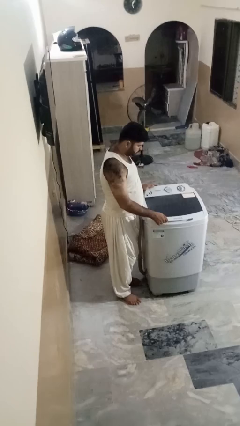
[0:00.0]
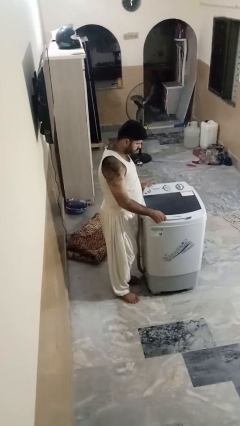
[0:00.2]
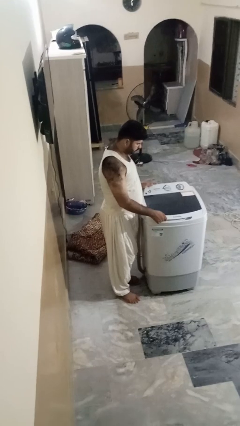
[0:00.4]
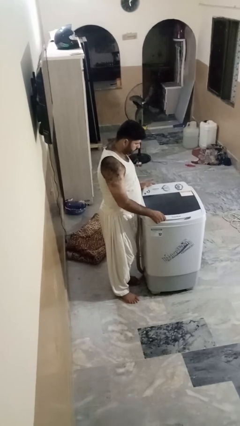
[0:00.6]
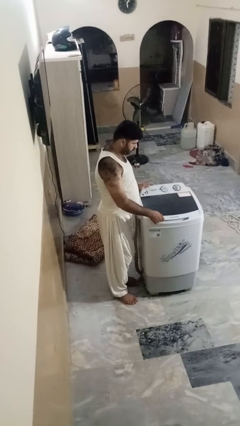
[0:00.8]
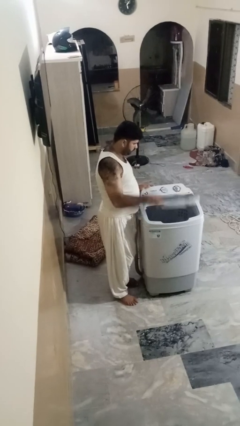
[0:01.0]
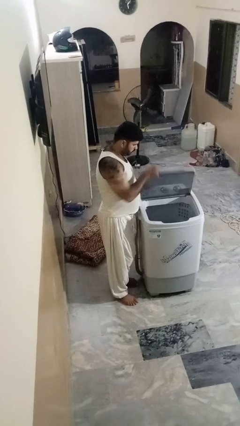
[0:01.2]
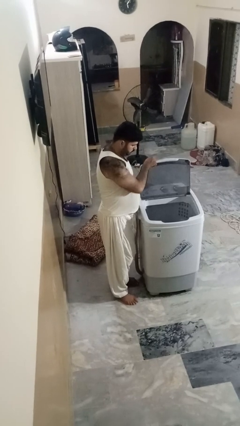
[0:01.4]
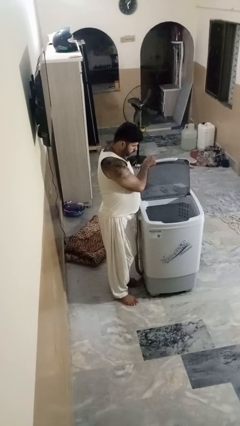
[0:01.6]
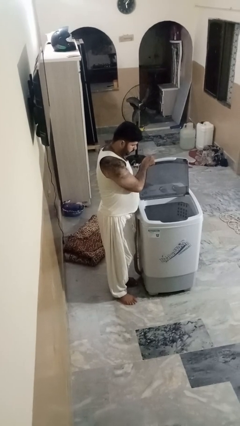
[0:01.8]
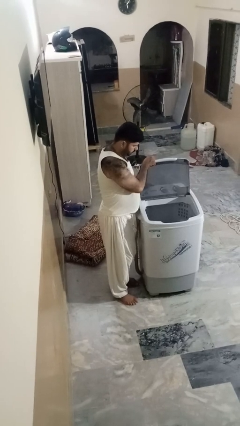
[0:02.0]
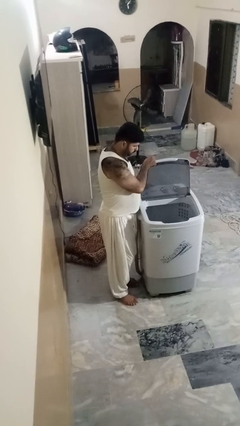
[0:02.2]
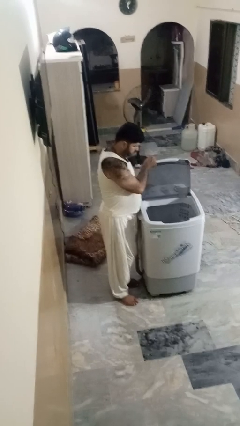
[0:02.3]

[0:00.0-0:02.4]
person opens clothes washer

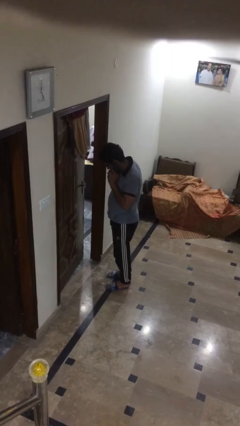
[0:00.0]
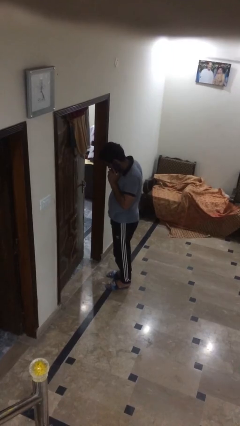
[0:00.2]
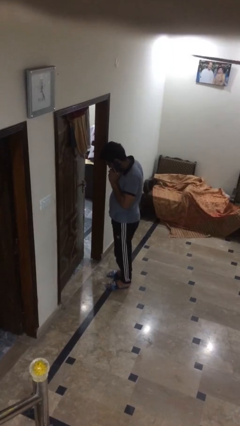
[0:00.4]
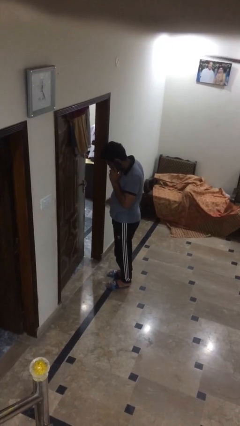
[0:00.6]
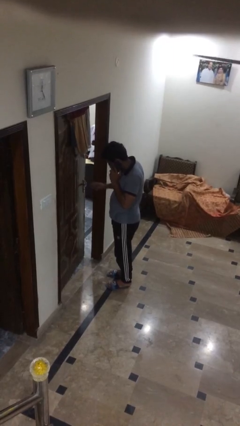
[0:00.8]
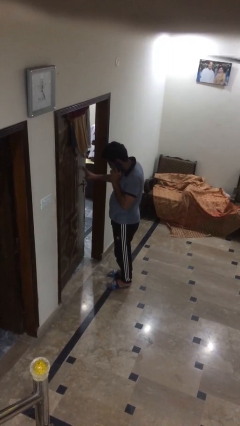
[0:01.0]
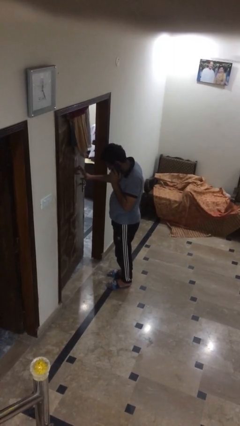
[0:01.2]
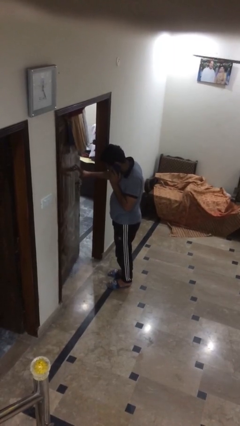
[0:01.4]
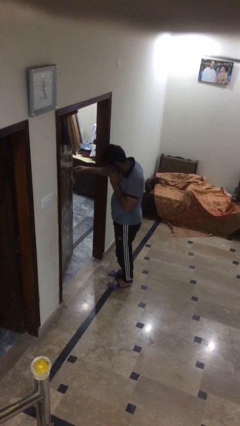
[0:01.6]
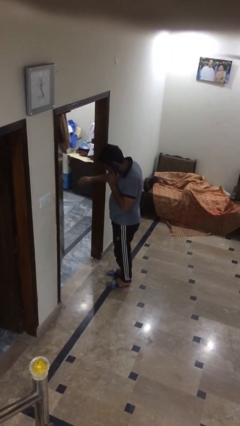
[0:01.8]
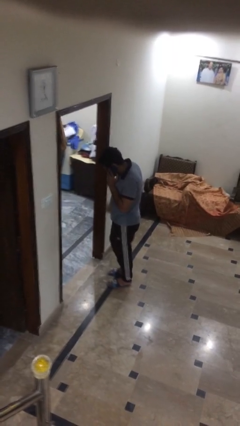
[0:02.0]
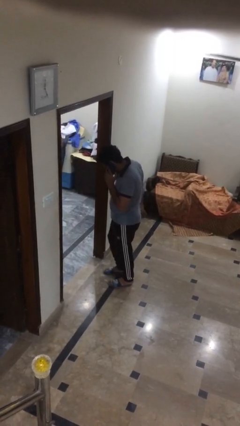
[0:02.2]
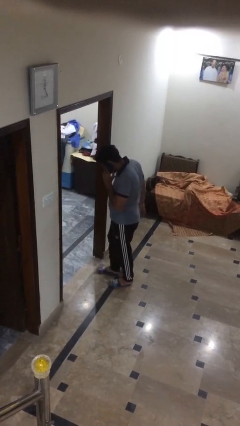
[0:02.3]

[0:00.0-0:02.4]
person opens facility door

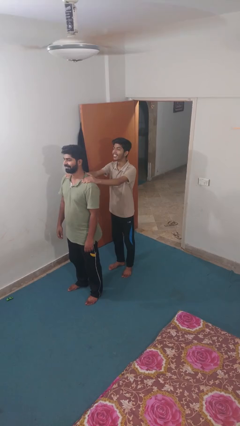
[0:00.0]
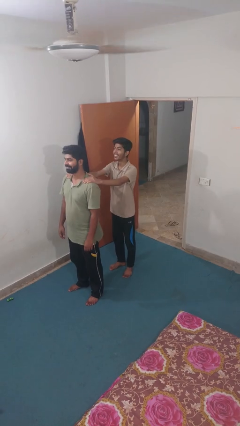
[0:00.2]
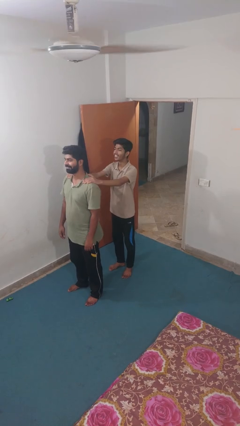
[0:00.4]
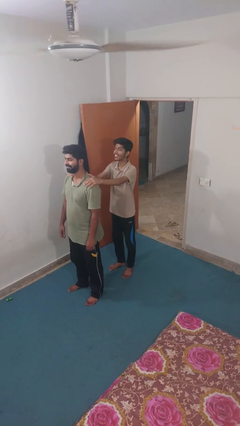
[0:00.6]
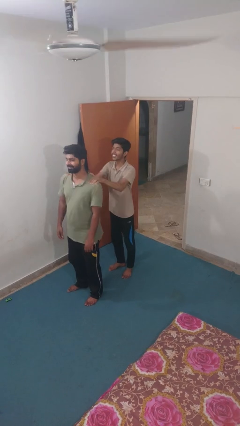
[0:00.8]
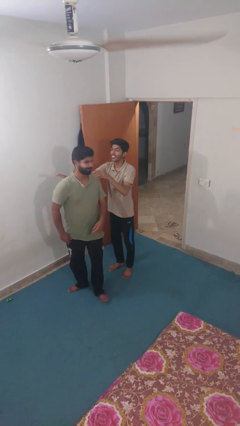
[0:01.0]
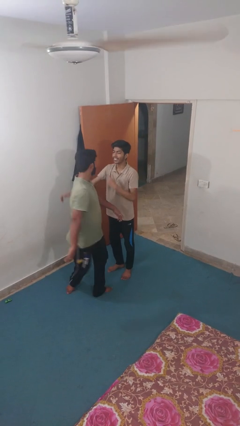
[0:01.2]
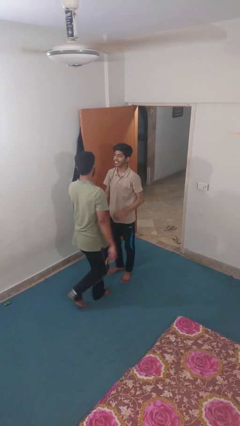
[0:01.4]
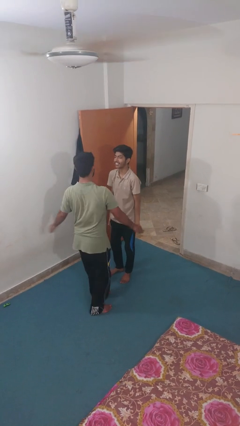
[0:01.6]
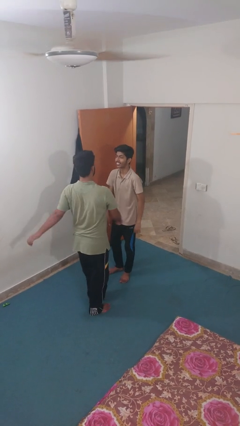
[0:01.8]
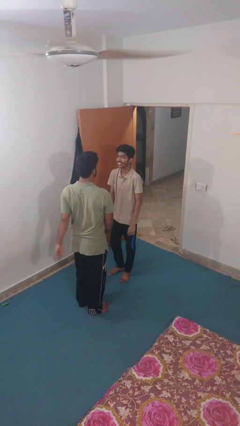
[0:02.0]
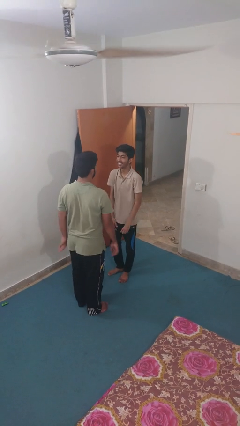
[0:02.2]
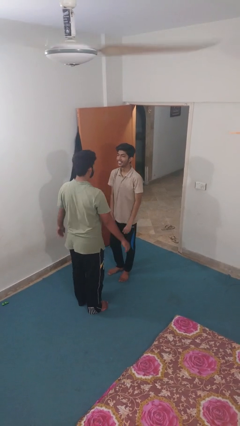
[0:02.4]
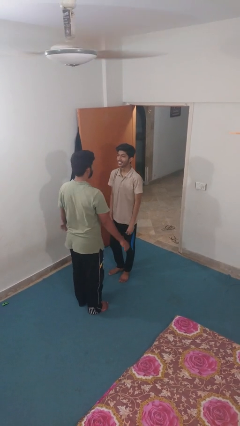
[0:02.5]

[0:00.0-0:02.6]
person spins person around

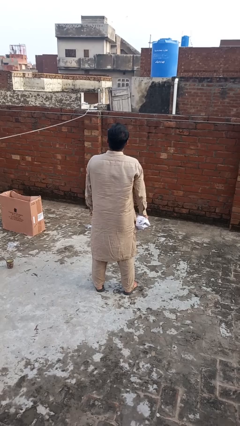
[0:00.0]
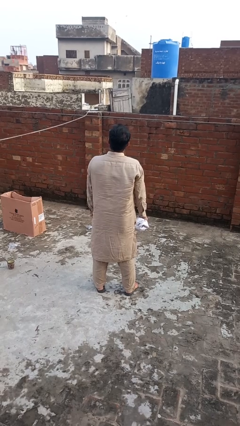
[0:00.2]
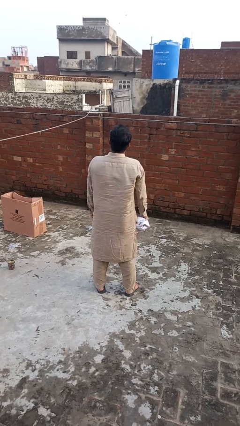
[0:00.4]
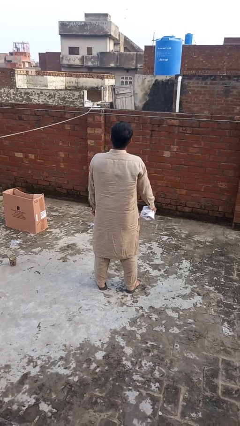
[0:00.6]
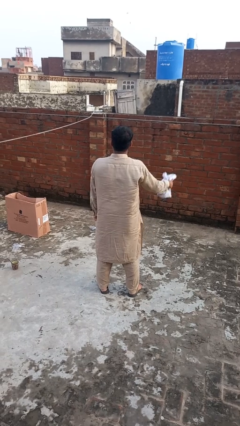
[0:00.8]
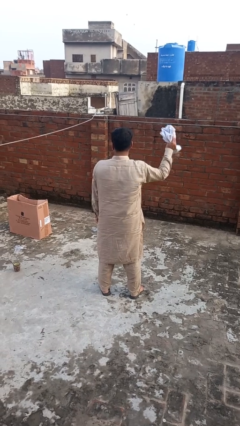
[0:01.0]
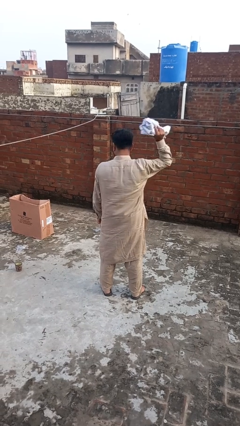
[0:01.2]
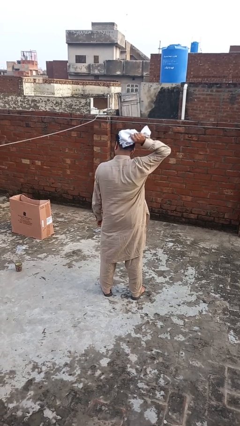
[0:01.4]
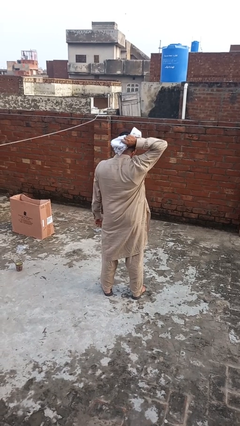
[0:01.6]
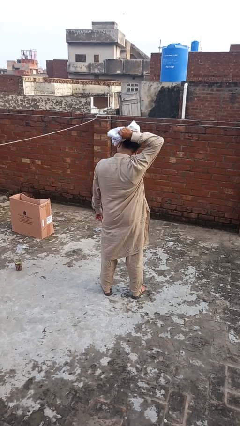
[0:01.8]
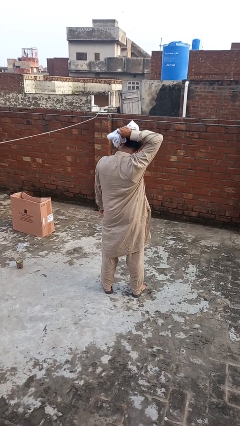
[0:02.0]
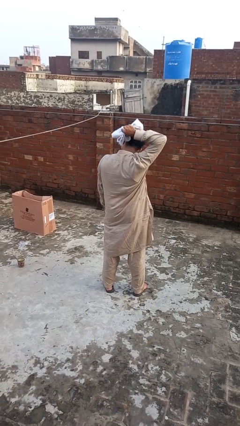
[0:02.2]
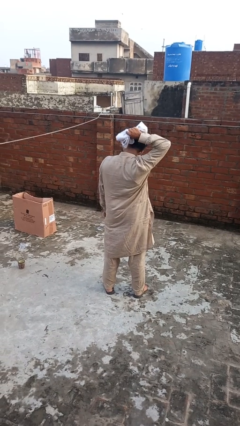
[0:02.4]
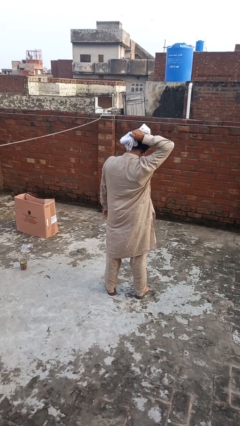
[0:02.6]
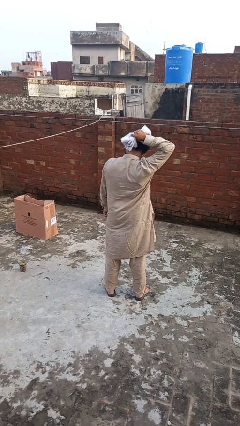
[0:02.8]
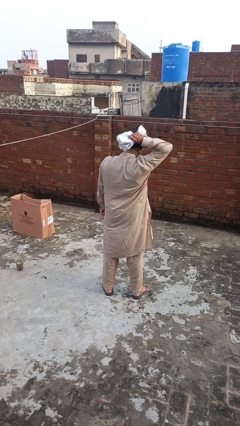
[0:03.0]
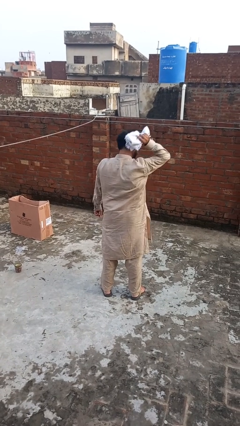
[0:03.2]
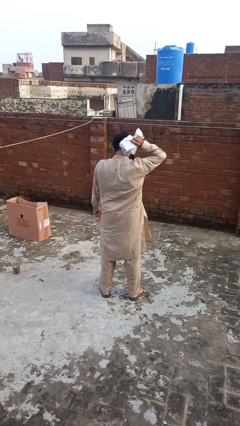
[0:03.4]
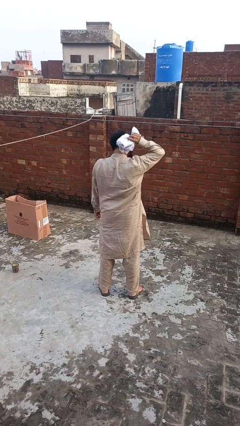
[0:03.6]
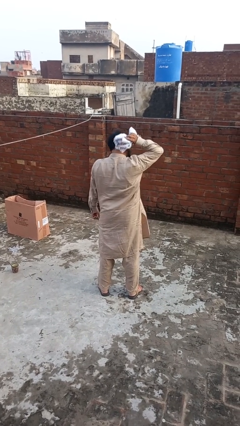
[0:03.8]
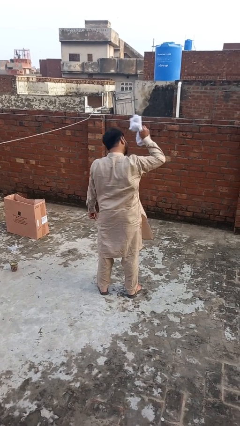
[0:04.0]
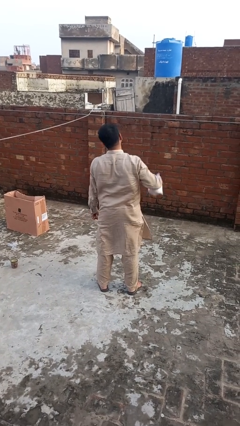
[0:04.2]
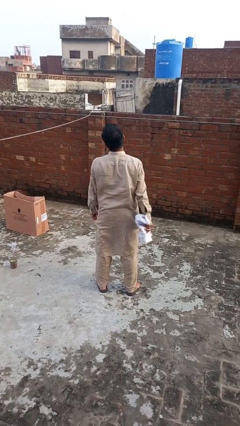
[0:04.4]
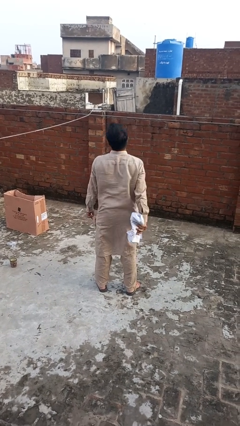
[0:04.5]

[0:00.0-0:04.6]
person dries hair with towel

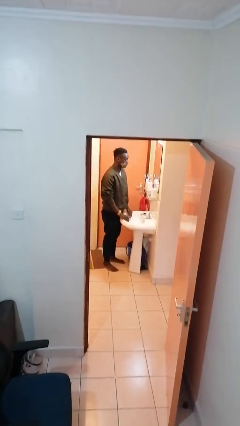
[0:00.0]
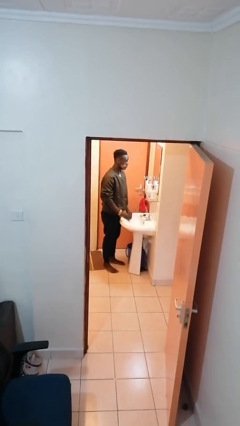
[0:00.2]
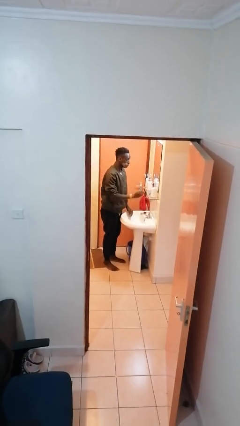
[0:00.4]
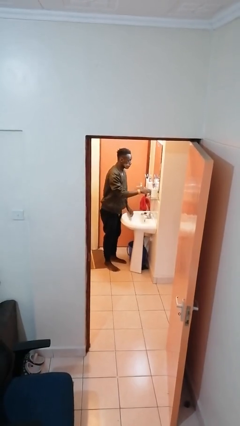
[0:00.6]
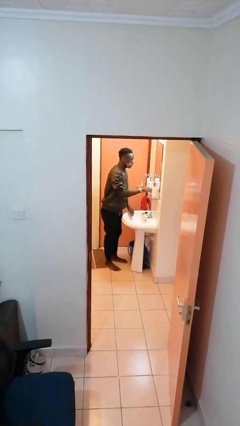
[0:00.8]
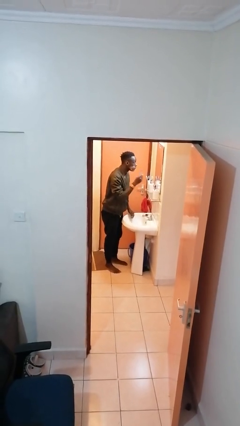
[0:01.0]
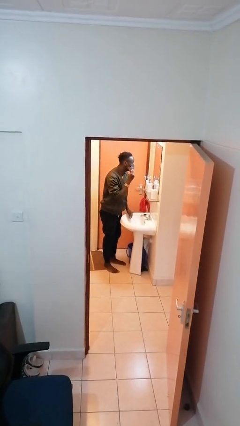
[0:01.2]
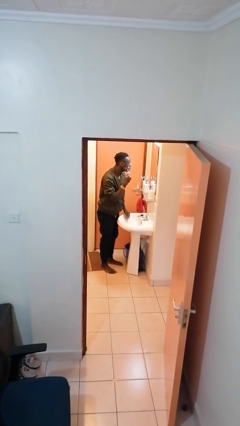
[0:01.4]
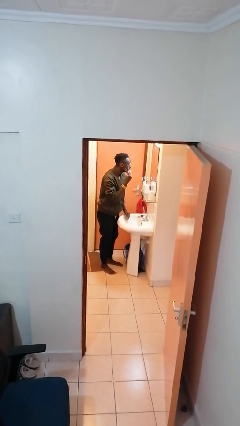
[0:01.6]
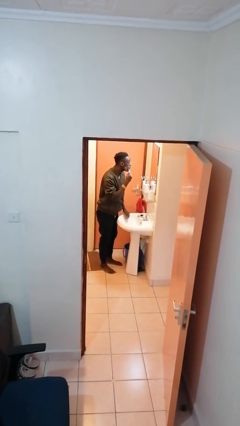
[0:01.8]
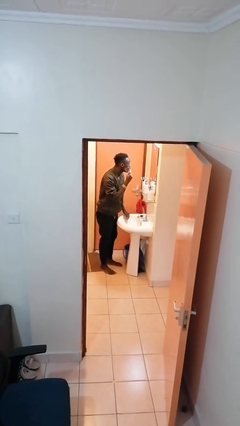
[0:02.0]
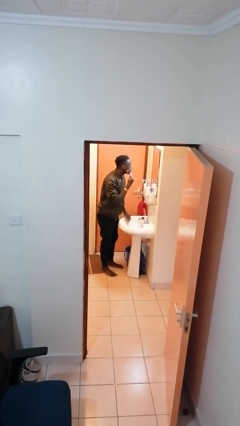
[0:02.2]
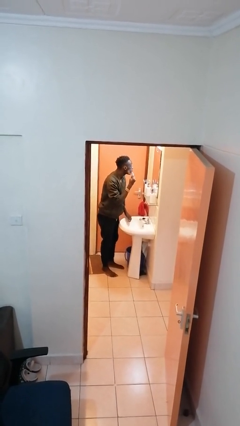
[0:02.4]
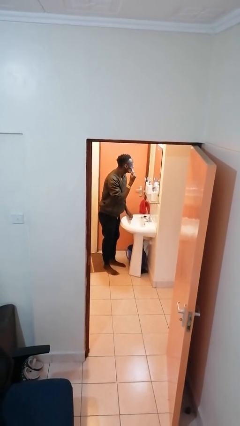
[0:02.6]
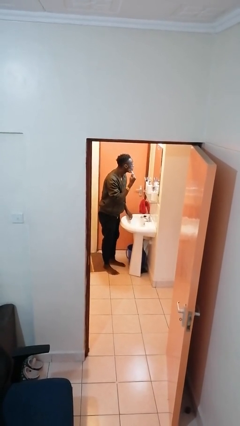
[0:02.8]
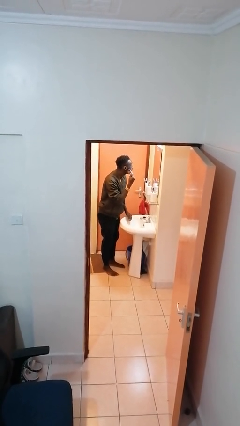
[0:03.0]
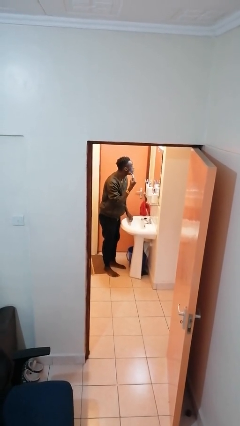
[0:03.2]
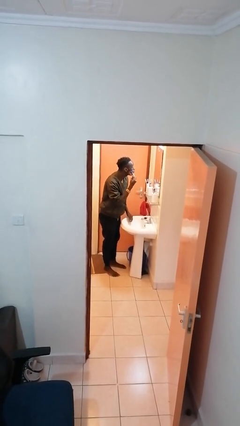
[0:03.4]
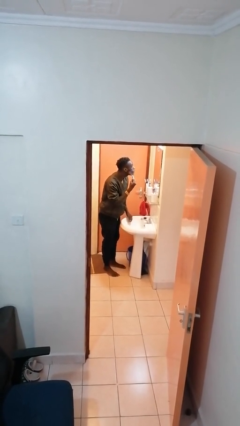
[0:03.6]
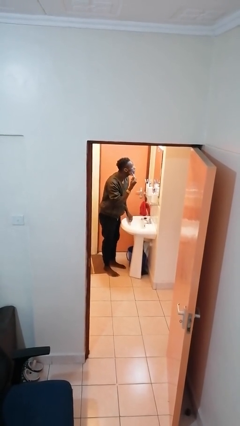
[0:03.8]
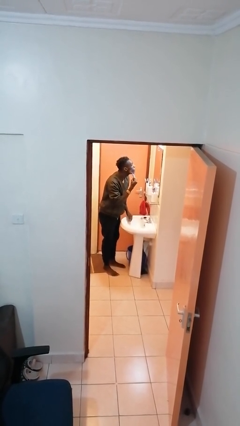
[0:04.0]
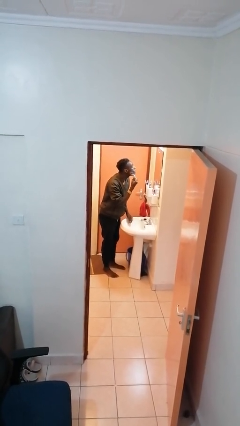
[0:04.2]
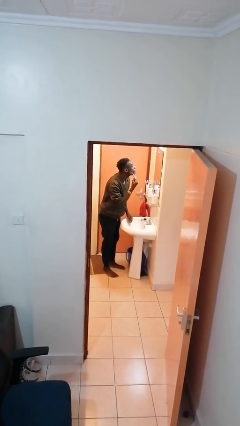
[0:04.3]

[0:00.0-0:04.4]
person shaves face

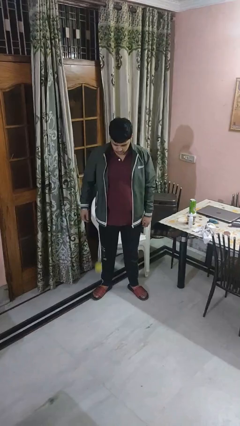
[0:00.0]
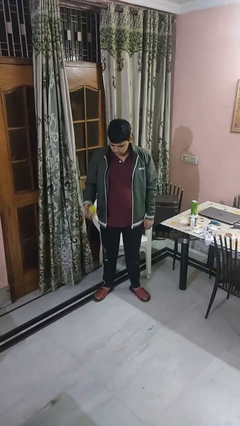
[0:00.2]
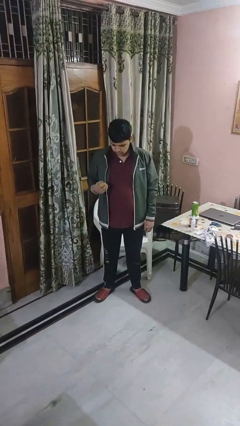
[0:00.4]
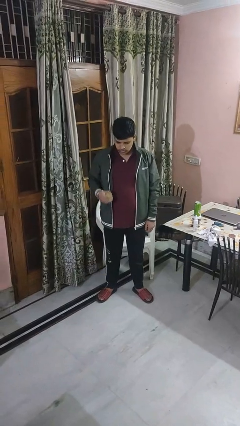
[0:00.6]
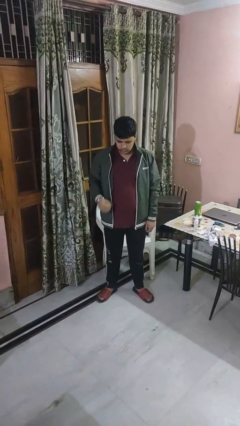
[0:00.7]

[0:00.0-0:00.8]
person bounces ball on floor
